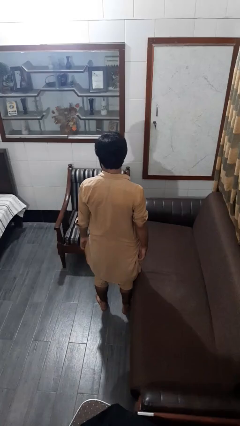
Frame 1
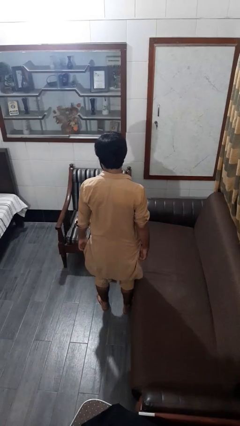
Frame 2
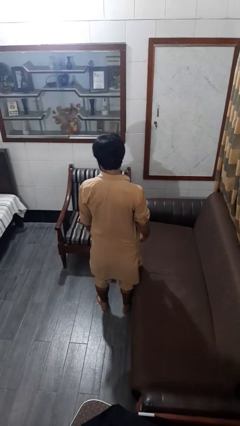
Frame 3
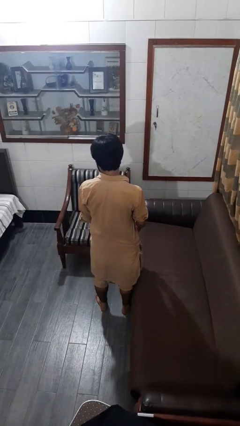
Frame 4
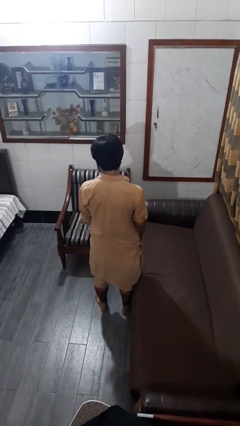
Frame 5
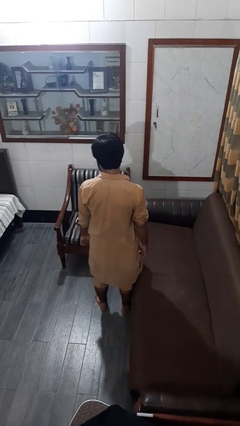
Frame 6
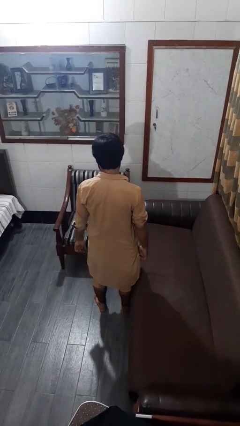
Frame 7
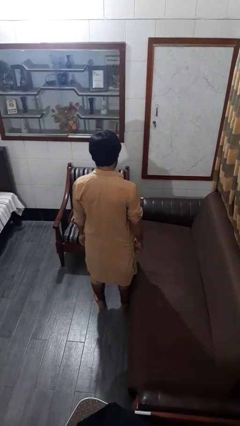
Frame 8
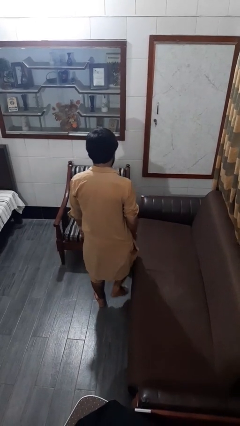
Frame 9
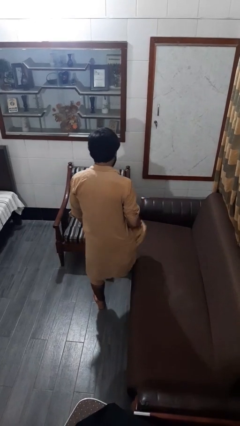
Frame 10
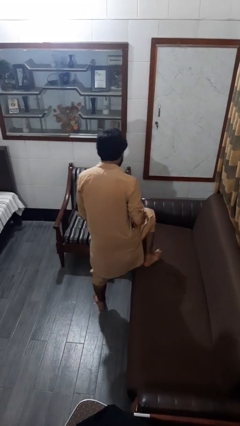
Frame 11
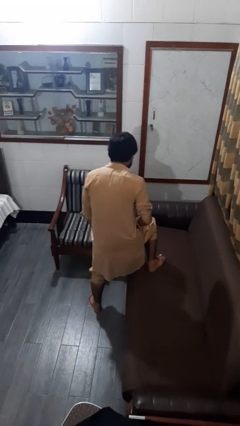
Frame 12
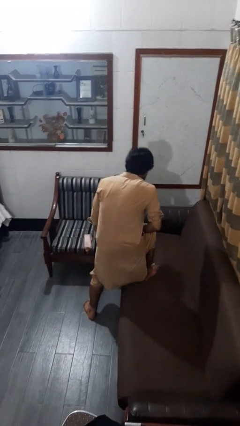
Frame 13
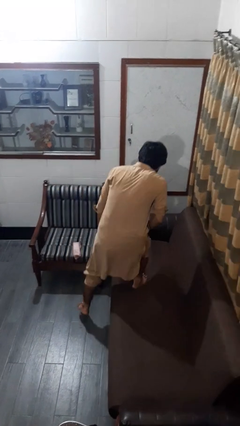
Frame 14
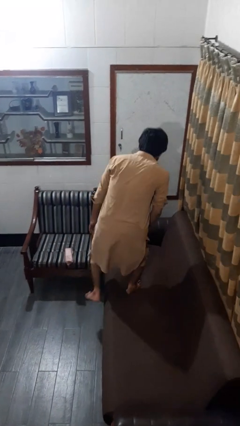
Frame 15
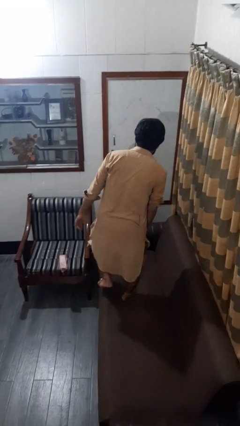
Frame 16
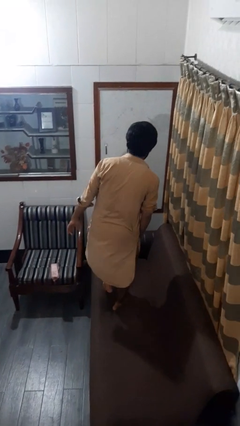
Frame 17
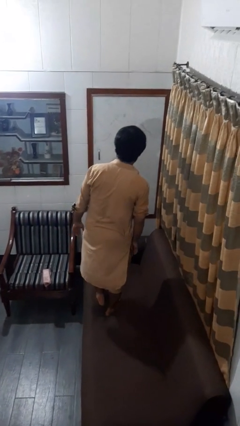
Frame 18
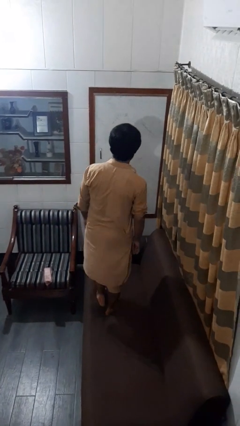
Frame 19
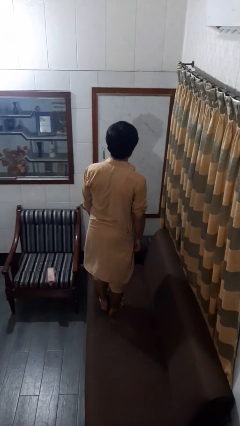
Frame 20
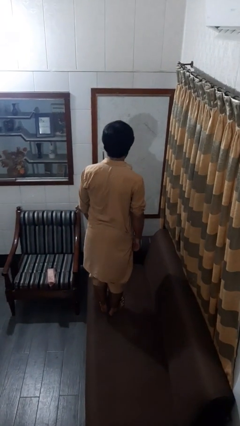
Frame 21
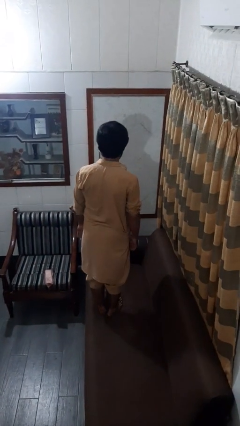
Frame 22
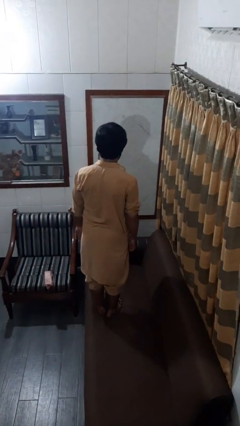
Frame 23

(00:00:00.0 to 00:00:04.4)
person climbs on couch

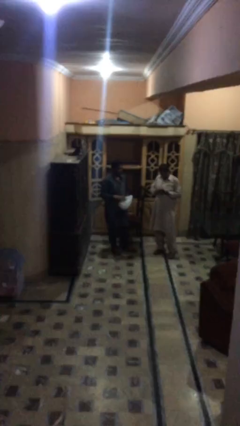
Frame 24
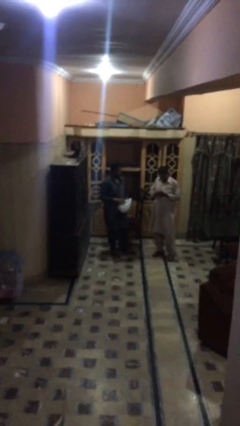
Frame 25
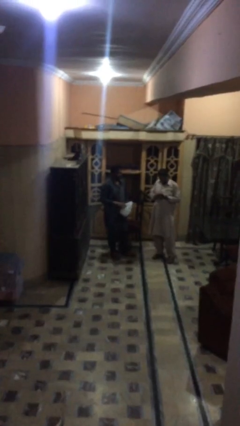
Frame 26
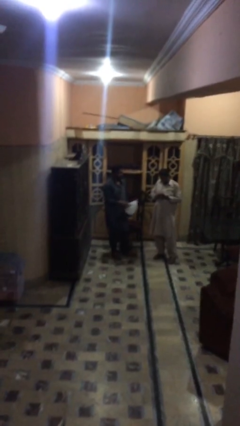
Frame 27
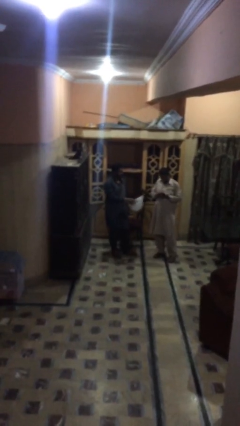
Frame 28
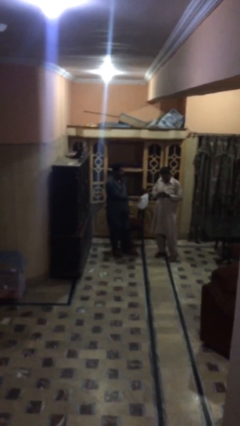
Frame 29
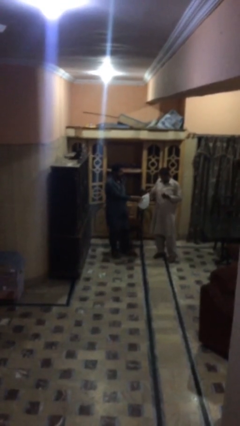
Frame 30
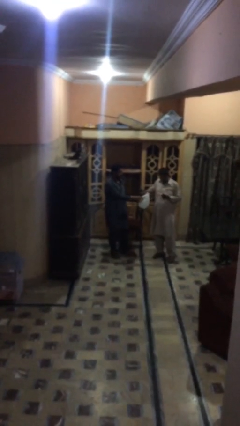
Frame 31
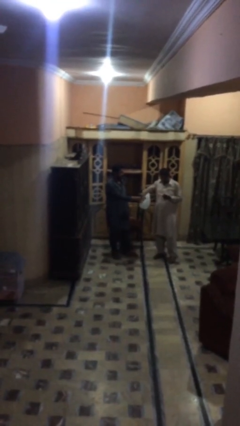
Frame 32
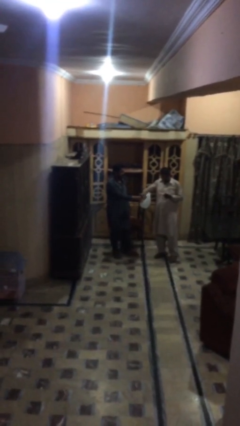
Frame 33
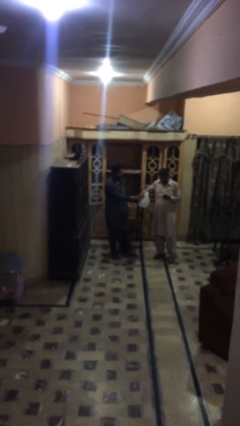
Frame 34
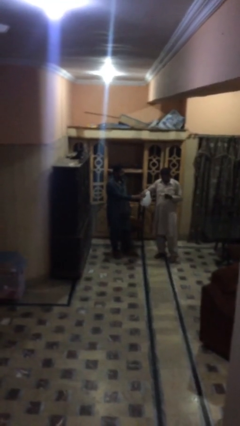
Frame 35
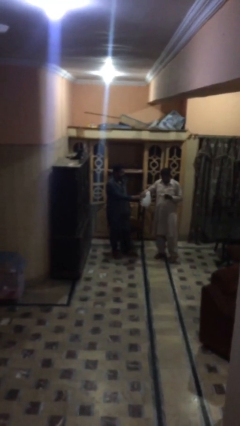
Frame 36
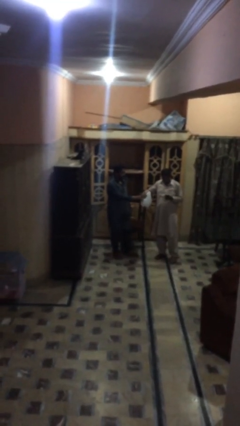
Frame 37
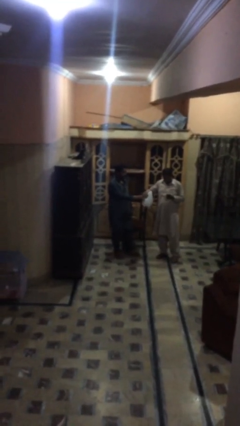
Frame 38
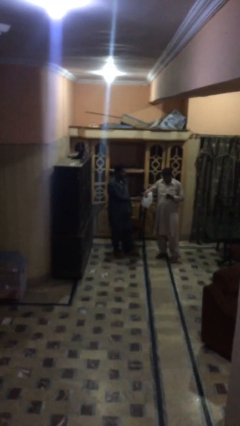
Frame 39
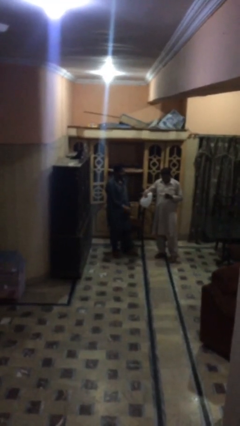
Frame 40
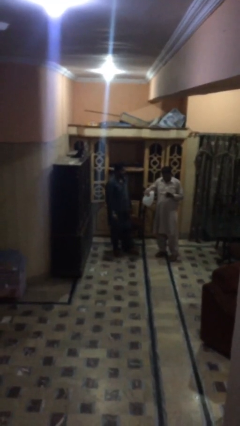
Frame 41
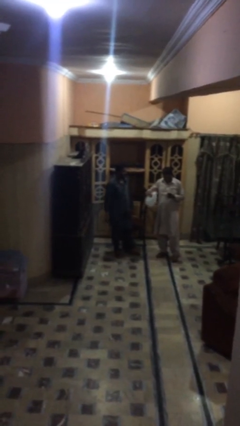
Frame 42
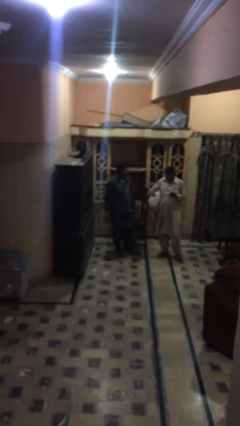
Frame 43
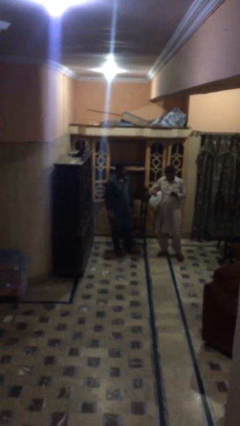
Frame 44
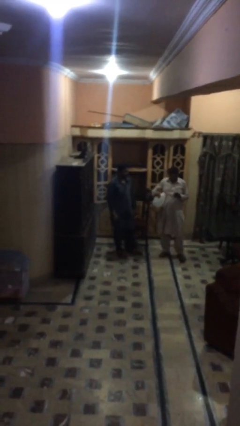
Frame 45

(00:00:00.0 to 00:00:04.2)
person transfers object to person

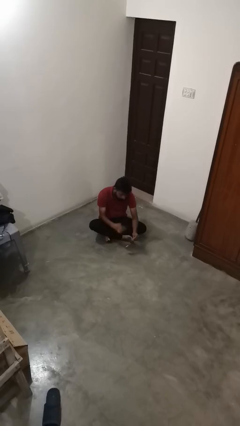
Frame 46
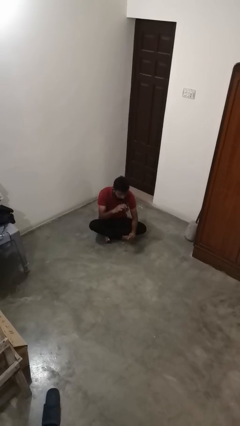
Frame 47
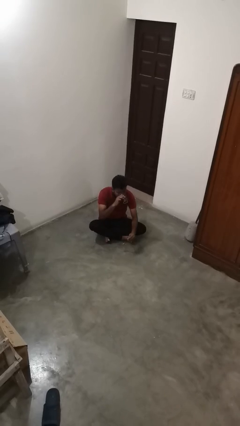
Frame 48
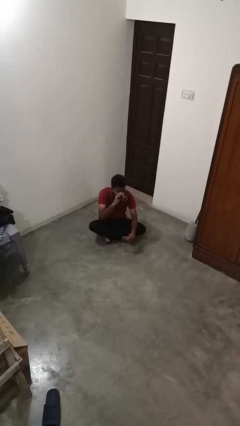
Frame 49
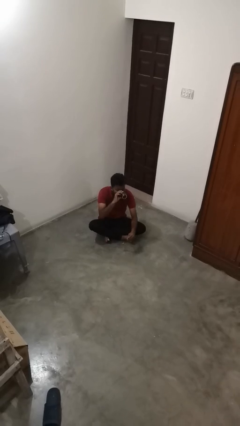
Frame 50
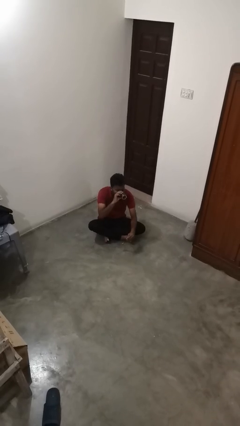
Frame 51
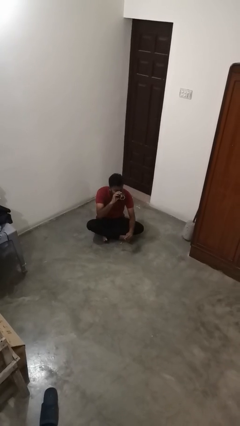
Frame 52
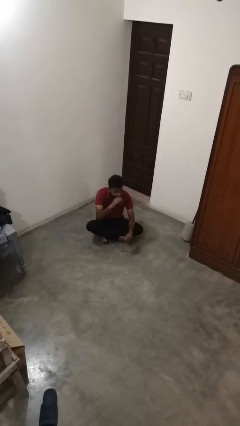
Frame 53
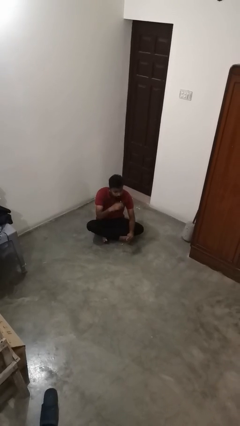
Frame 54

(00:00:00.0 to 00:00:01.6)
person drinks from mug

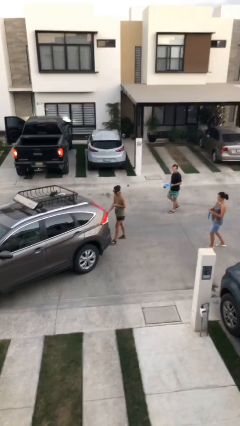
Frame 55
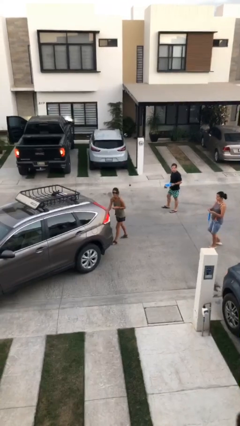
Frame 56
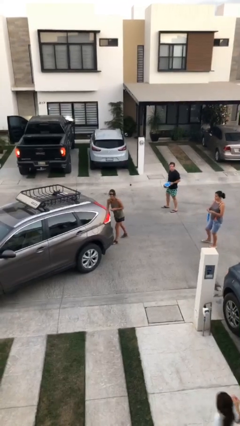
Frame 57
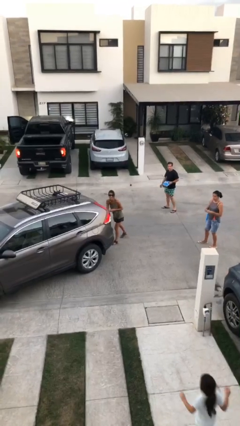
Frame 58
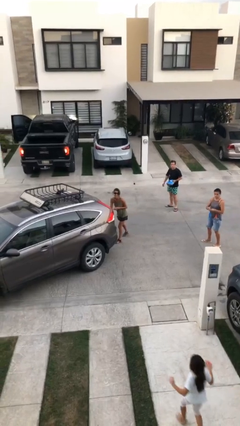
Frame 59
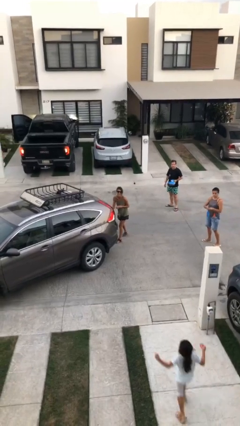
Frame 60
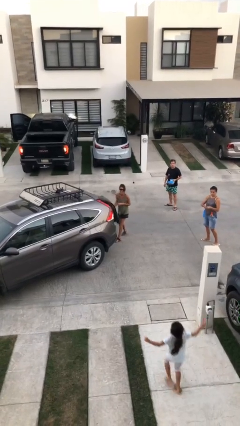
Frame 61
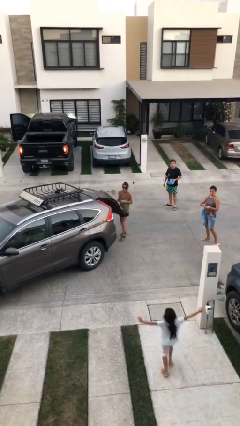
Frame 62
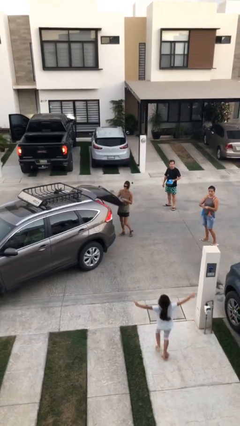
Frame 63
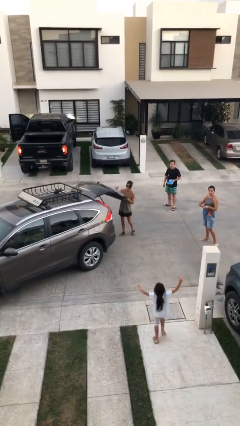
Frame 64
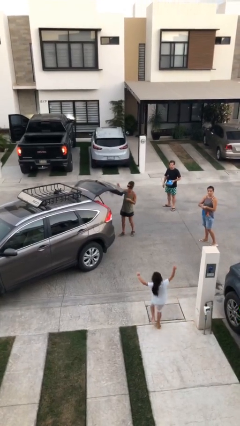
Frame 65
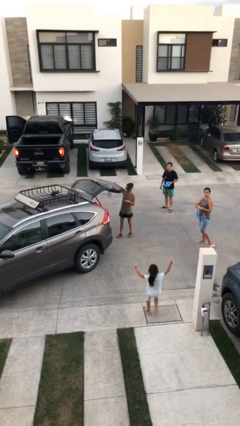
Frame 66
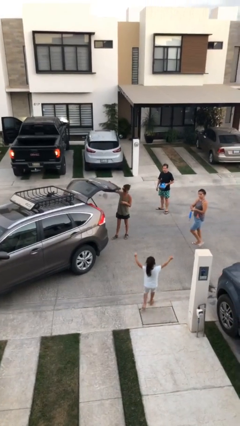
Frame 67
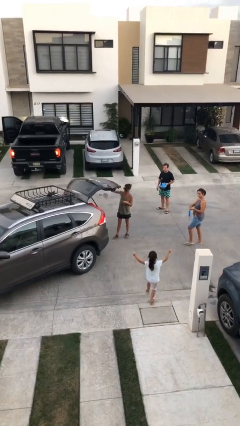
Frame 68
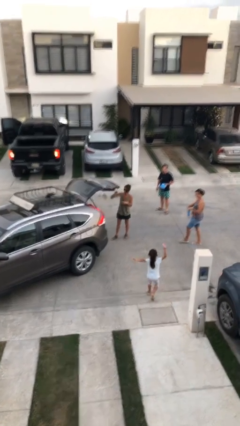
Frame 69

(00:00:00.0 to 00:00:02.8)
person opens car trunk

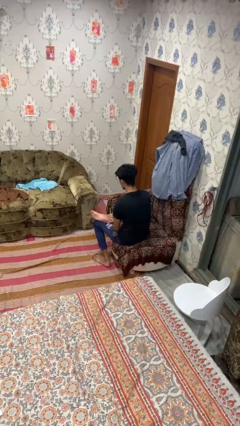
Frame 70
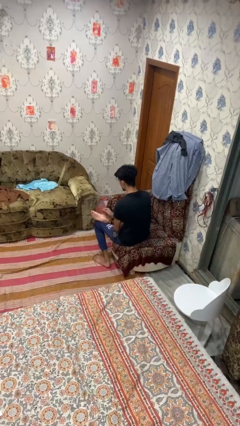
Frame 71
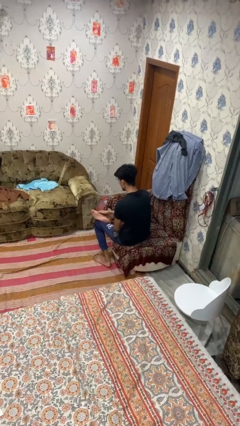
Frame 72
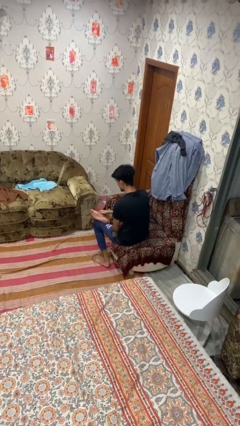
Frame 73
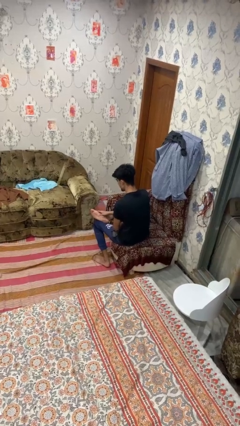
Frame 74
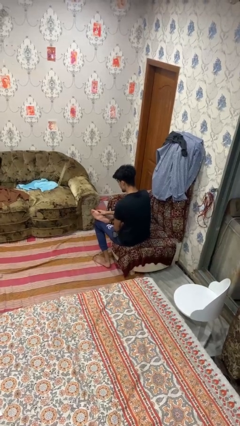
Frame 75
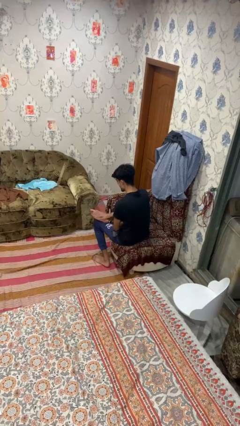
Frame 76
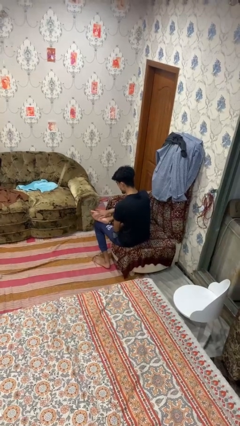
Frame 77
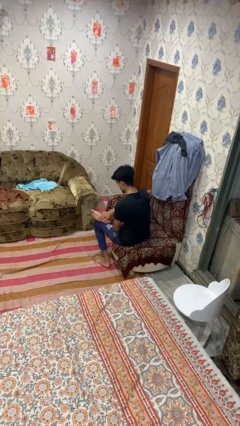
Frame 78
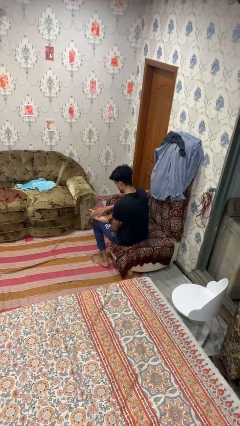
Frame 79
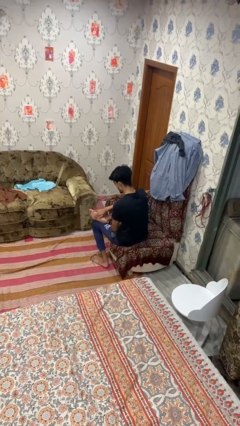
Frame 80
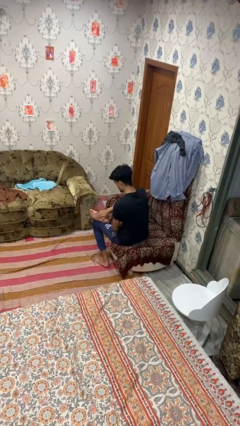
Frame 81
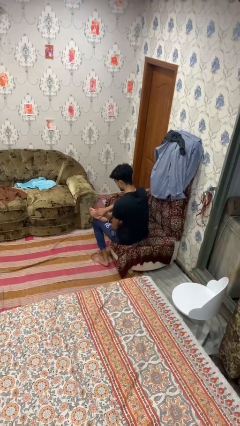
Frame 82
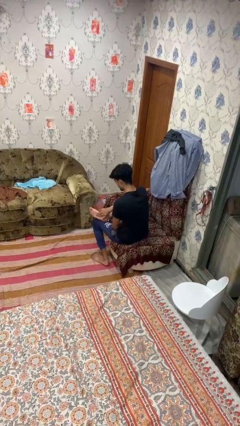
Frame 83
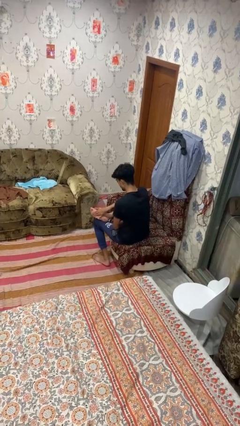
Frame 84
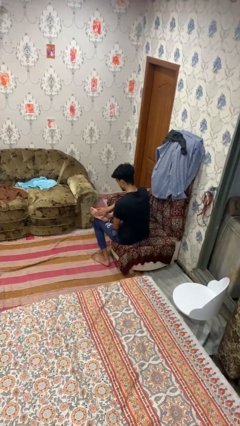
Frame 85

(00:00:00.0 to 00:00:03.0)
person rubs foot

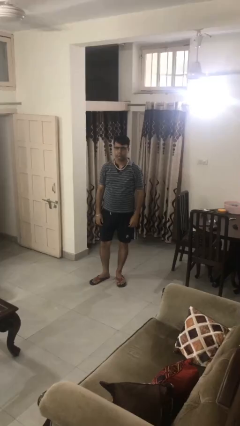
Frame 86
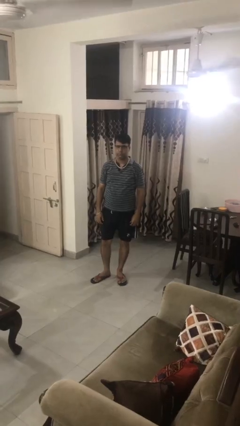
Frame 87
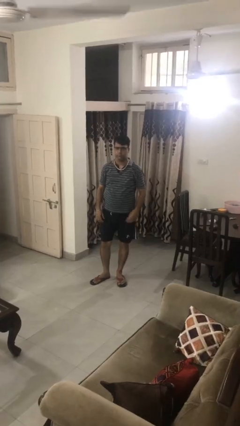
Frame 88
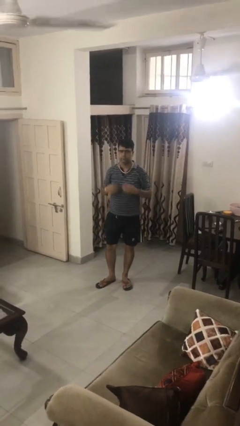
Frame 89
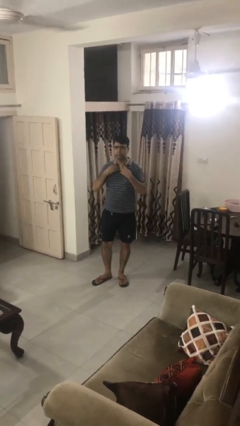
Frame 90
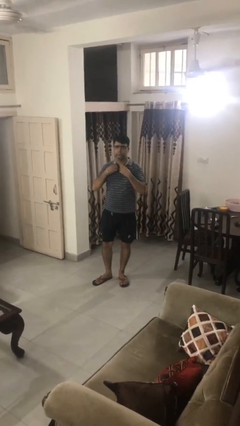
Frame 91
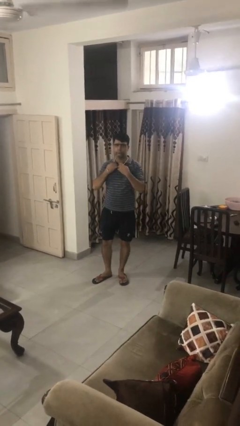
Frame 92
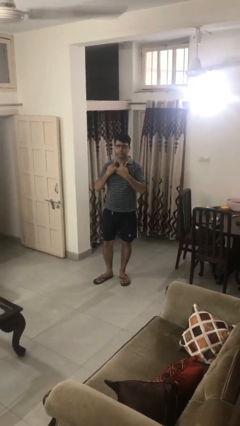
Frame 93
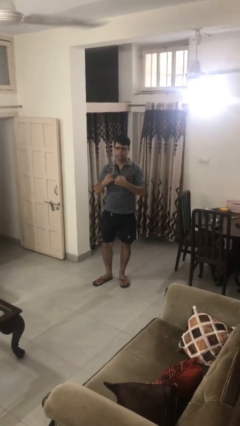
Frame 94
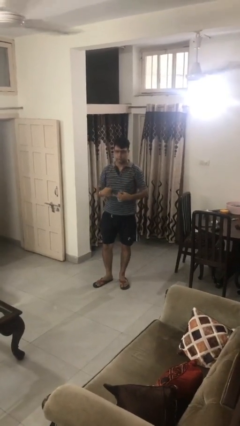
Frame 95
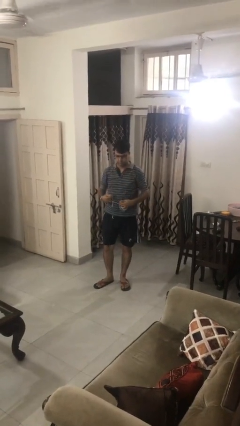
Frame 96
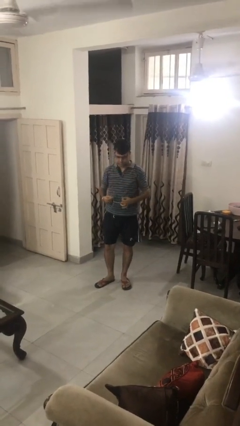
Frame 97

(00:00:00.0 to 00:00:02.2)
person takes off necklace
